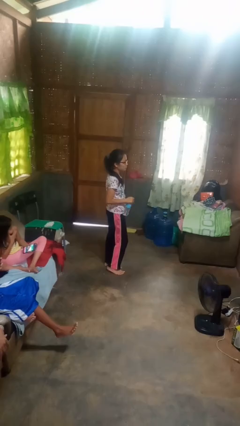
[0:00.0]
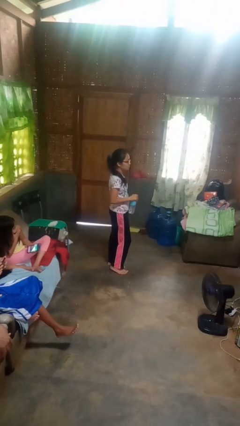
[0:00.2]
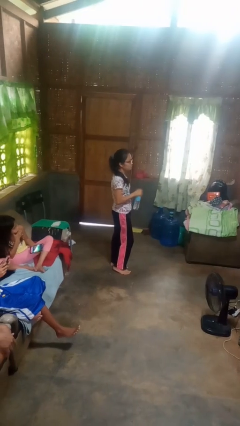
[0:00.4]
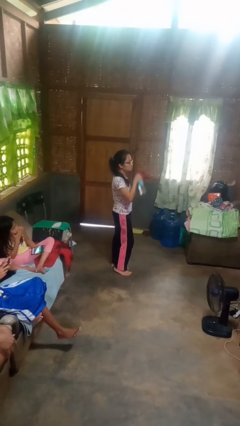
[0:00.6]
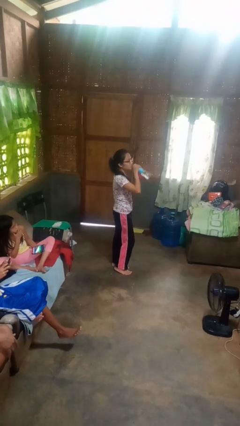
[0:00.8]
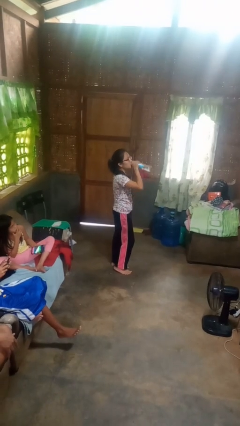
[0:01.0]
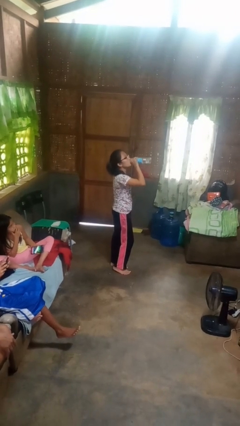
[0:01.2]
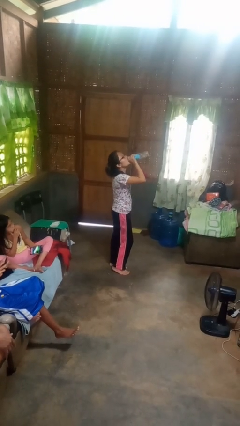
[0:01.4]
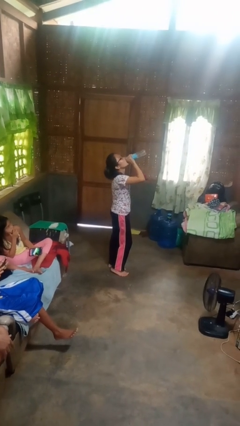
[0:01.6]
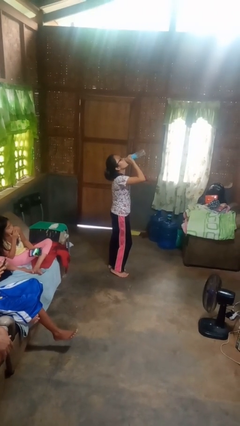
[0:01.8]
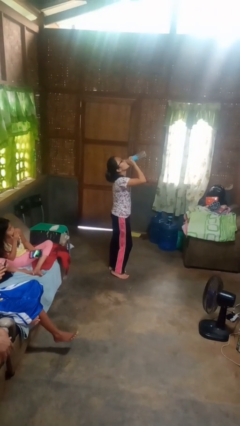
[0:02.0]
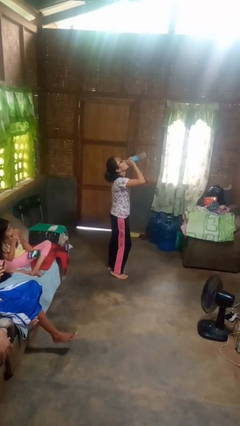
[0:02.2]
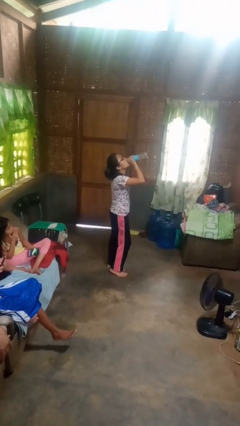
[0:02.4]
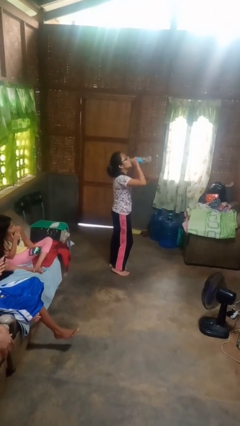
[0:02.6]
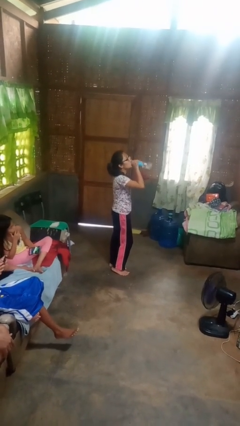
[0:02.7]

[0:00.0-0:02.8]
person drinks from bottle

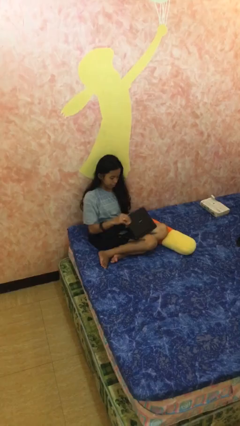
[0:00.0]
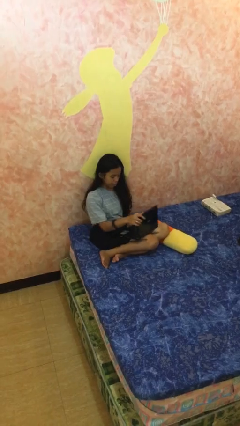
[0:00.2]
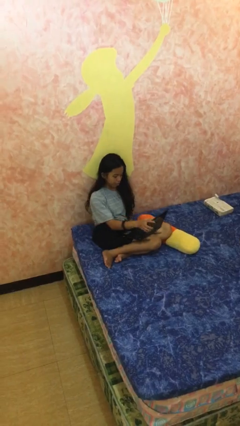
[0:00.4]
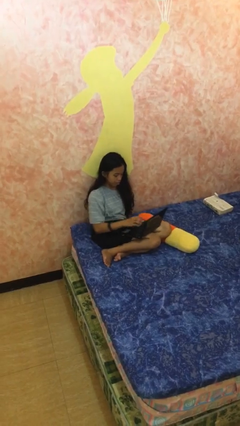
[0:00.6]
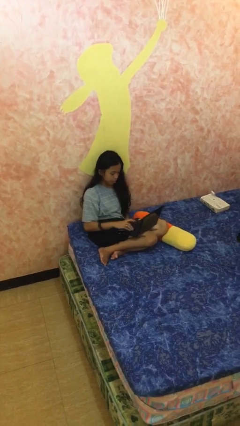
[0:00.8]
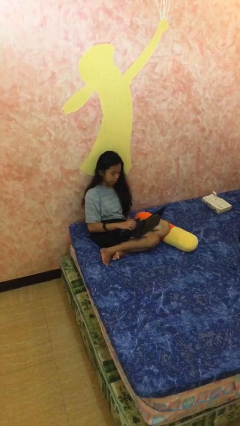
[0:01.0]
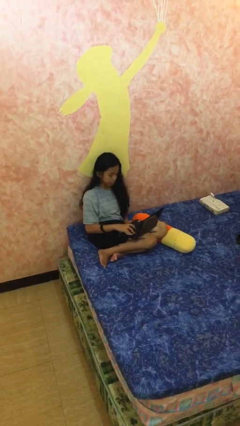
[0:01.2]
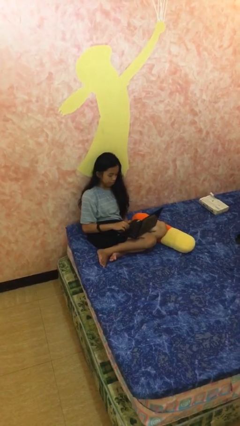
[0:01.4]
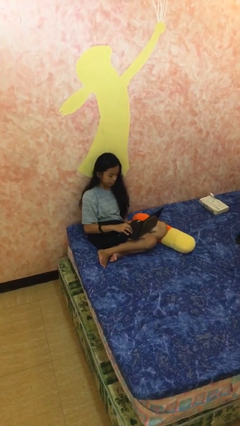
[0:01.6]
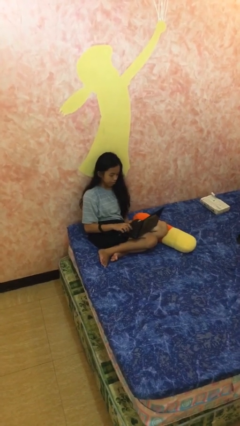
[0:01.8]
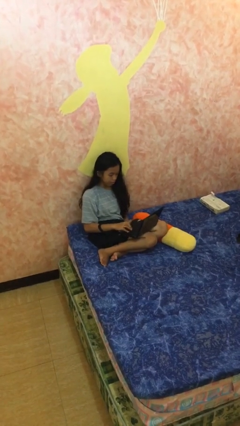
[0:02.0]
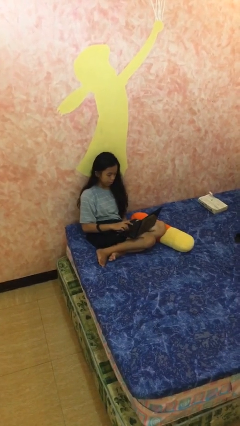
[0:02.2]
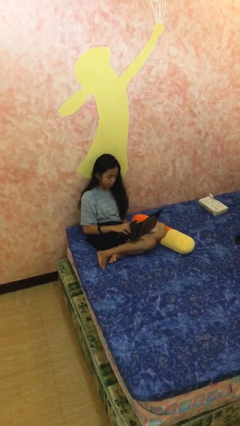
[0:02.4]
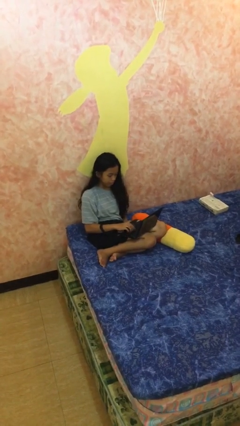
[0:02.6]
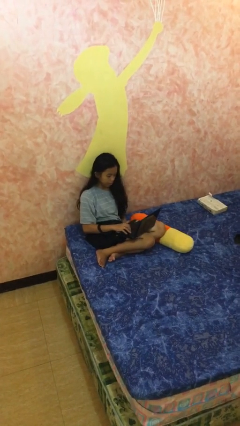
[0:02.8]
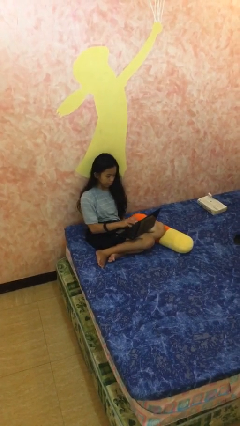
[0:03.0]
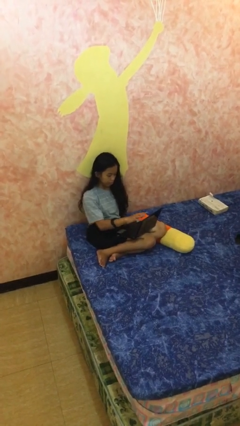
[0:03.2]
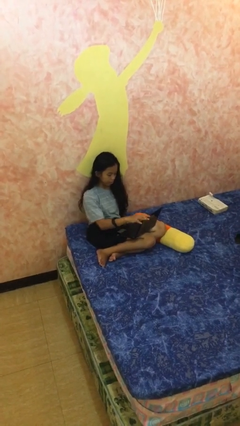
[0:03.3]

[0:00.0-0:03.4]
person interacts with laptop

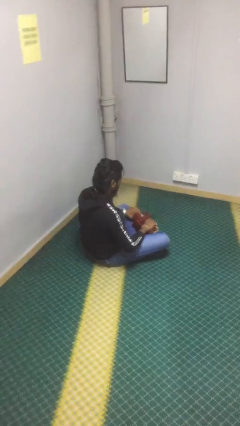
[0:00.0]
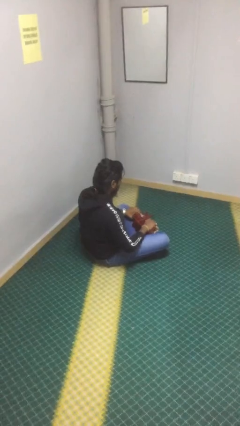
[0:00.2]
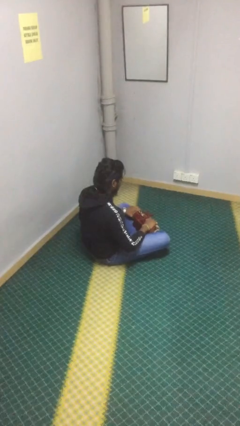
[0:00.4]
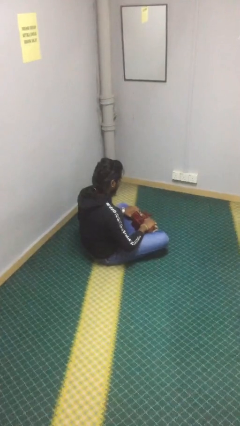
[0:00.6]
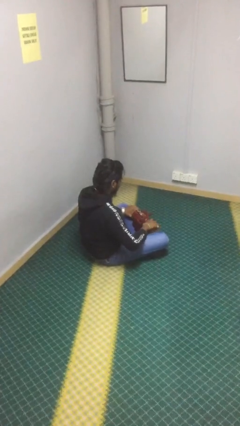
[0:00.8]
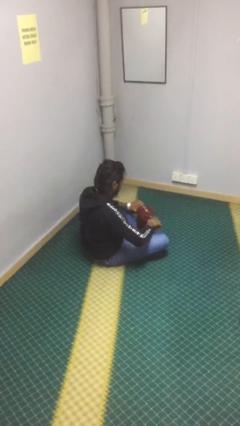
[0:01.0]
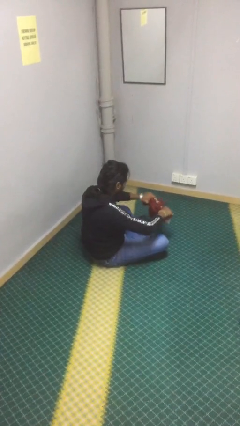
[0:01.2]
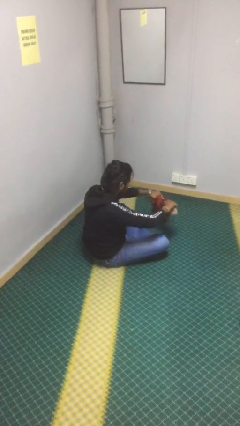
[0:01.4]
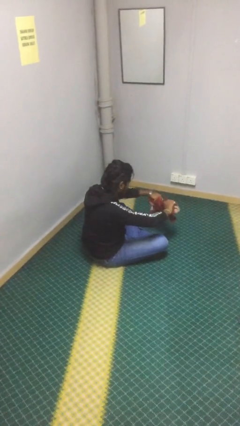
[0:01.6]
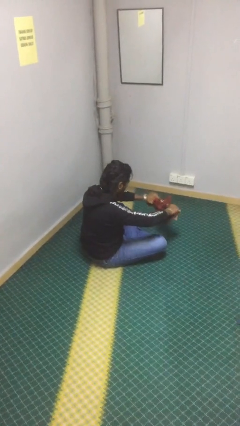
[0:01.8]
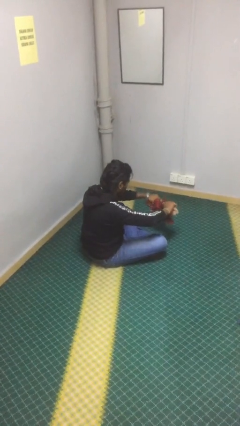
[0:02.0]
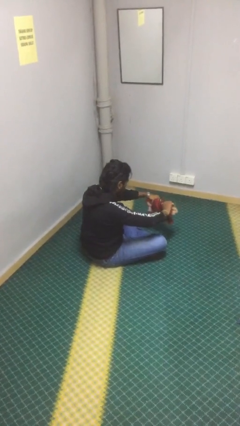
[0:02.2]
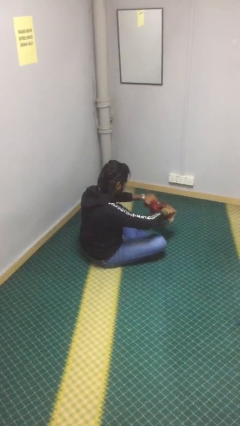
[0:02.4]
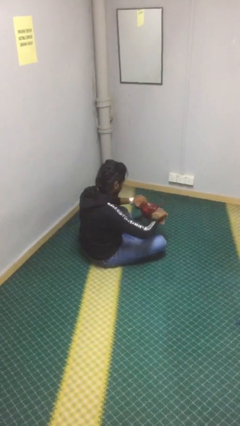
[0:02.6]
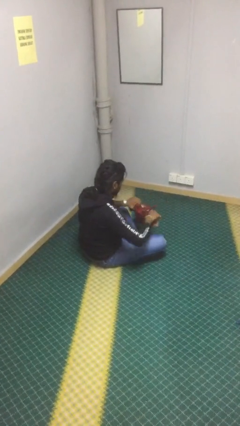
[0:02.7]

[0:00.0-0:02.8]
person squeezes object

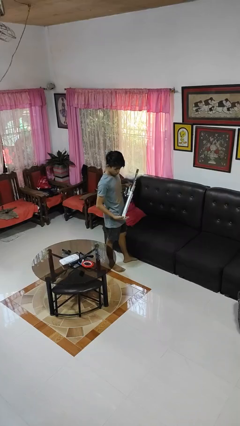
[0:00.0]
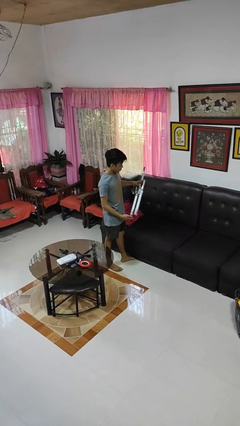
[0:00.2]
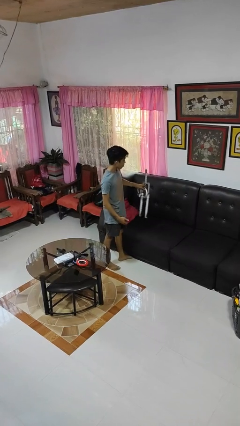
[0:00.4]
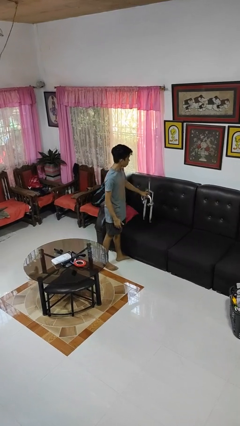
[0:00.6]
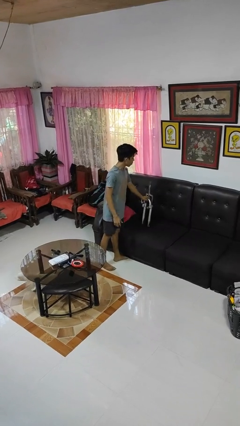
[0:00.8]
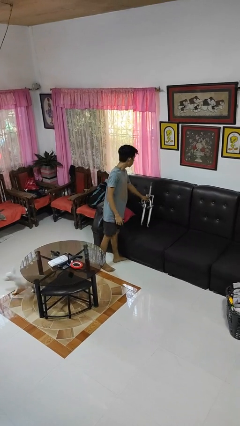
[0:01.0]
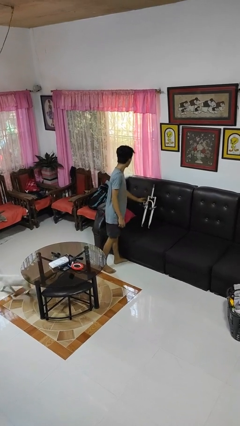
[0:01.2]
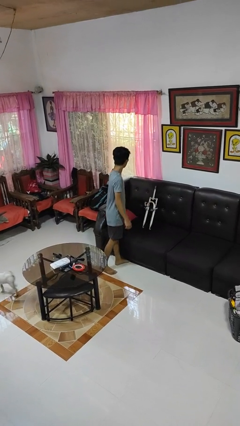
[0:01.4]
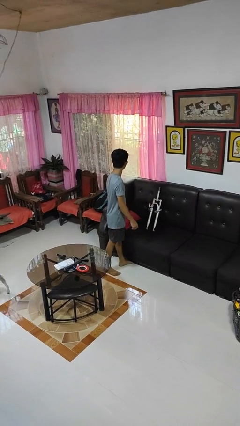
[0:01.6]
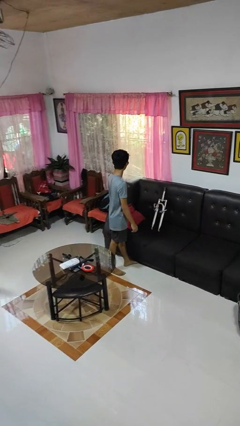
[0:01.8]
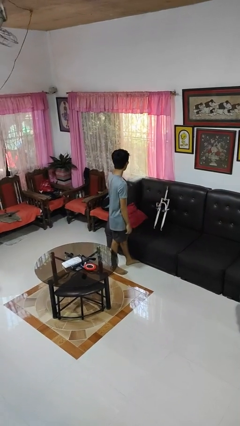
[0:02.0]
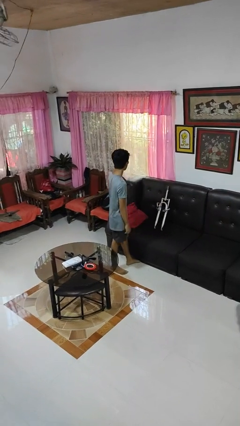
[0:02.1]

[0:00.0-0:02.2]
person puts down object on couch

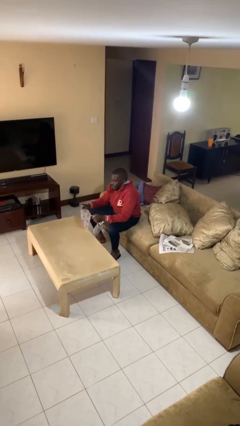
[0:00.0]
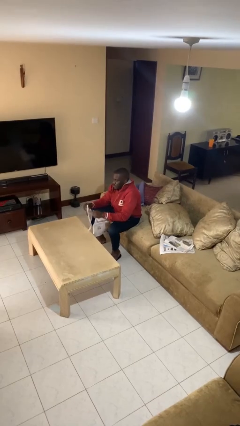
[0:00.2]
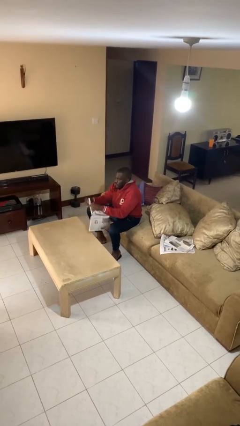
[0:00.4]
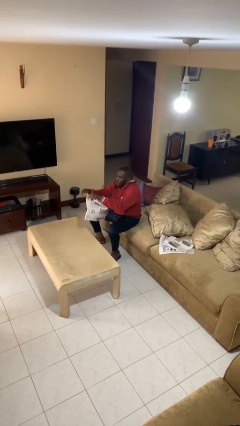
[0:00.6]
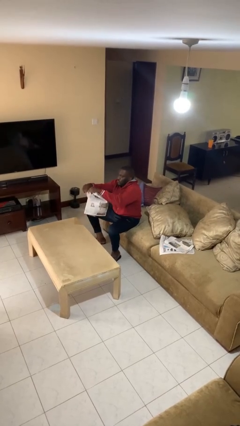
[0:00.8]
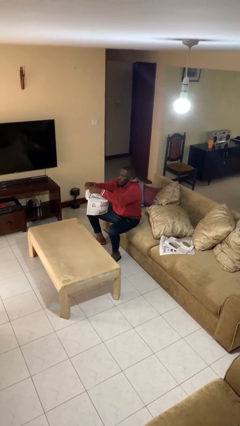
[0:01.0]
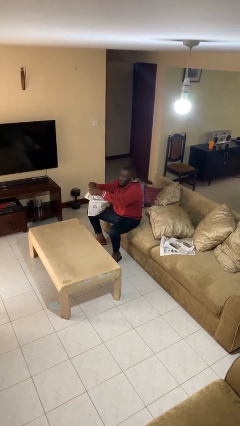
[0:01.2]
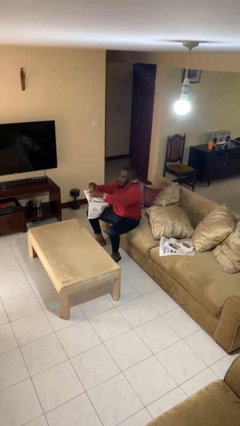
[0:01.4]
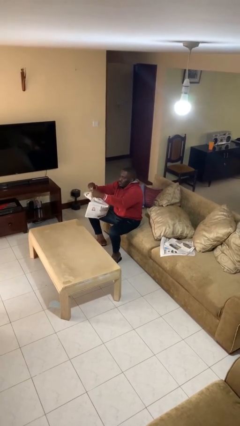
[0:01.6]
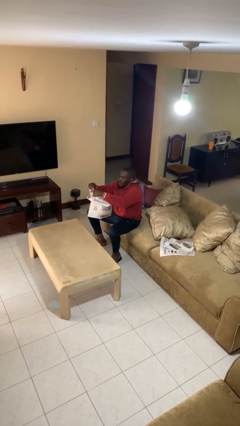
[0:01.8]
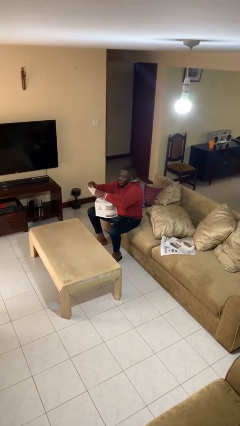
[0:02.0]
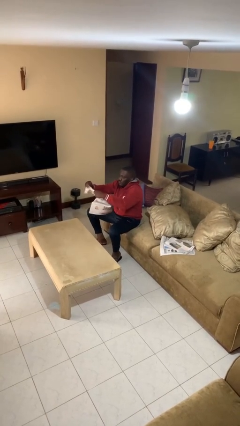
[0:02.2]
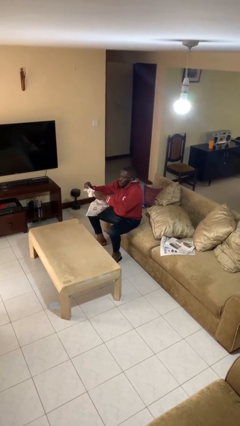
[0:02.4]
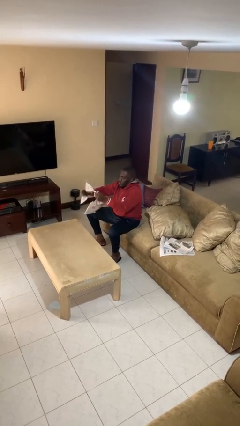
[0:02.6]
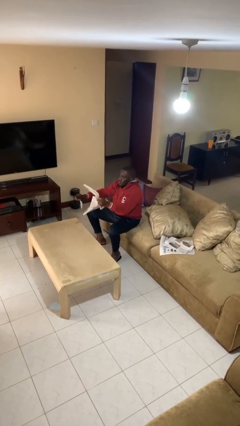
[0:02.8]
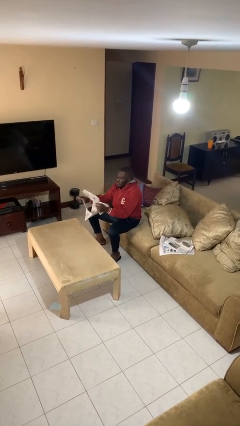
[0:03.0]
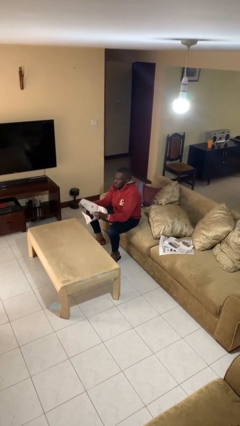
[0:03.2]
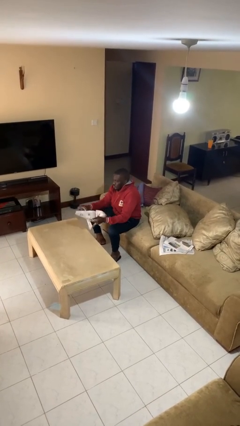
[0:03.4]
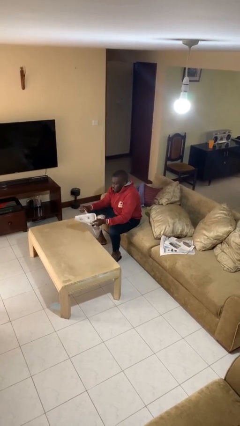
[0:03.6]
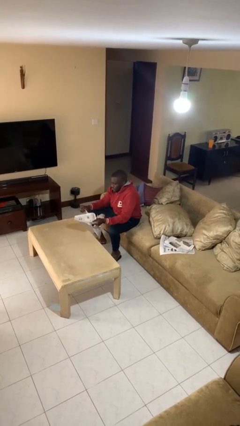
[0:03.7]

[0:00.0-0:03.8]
person tears paper

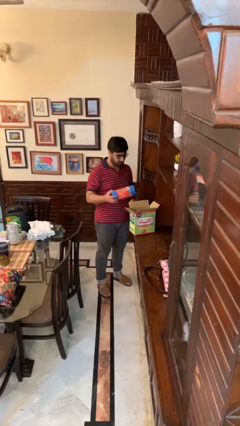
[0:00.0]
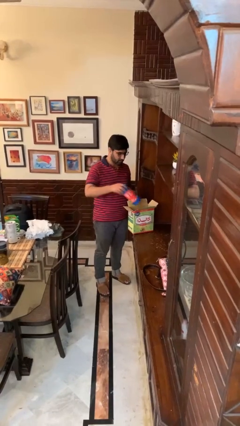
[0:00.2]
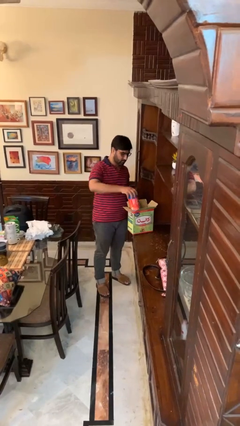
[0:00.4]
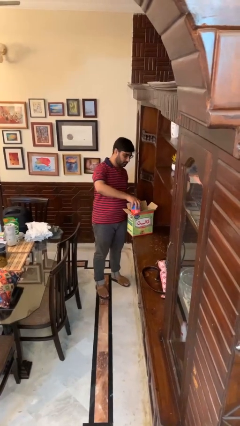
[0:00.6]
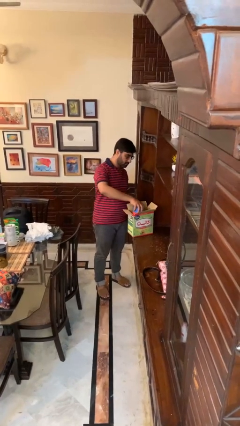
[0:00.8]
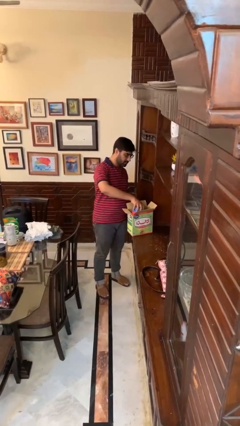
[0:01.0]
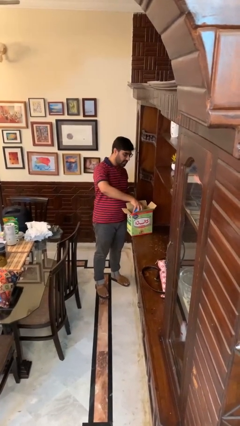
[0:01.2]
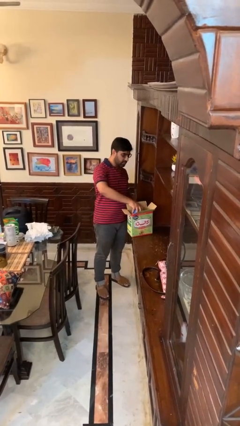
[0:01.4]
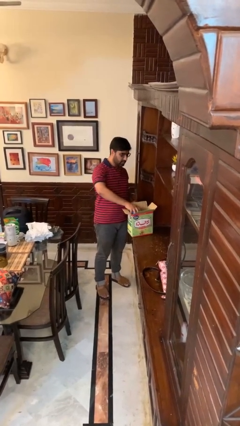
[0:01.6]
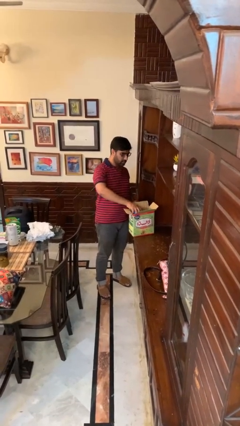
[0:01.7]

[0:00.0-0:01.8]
person puts object into box

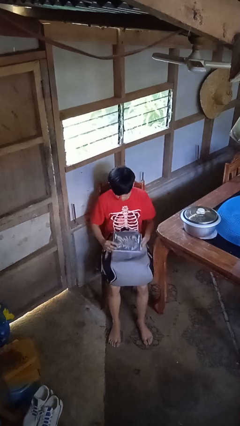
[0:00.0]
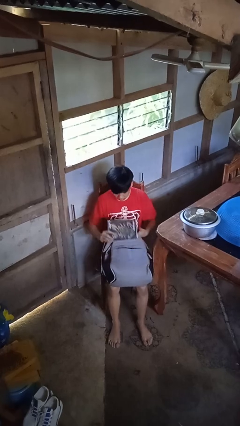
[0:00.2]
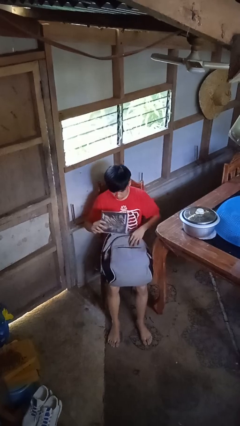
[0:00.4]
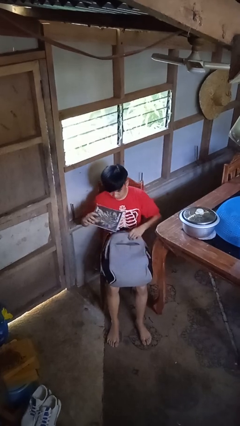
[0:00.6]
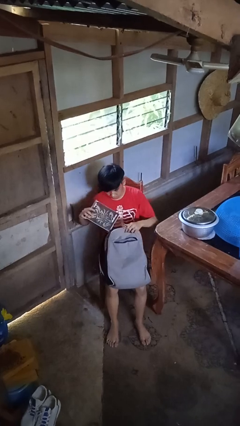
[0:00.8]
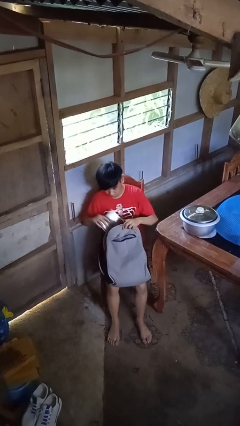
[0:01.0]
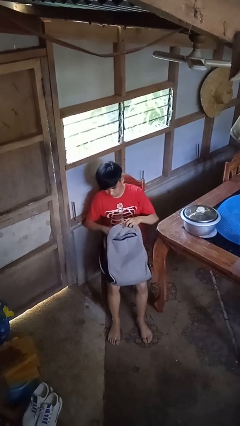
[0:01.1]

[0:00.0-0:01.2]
person puts object into backpack
